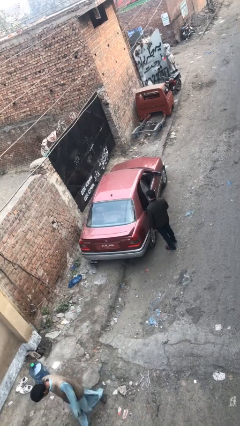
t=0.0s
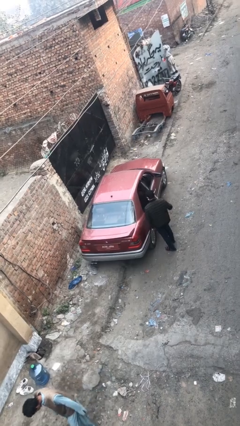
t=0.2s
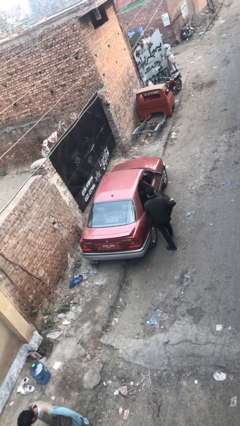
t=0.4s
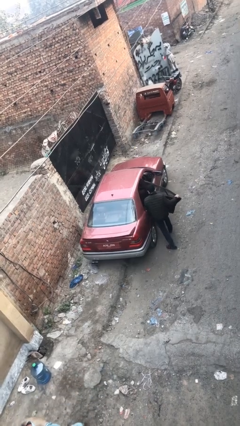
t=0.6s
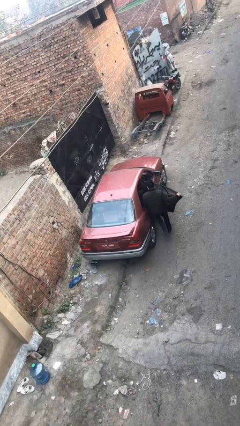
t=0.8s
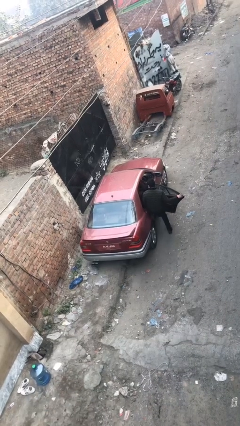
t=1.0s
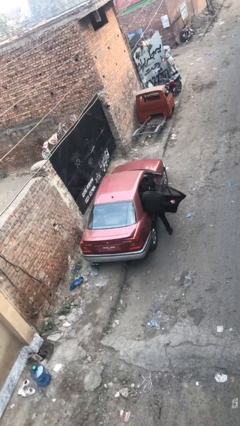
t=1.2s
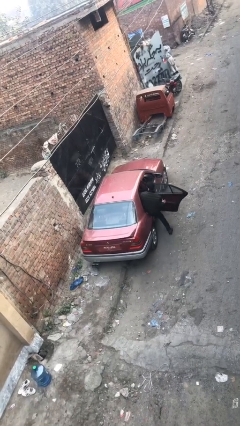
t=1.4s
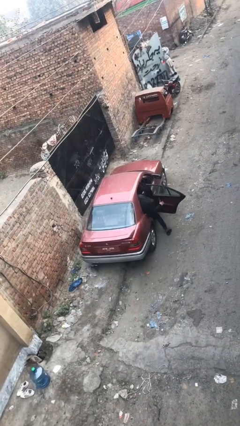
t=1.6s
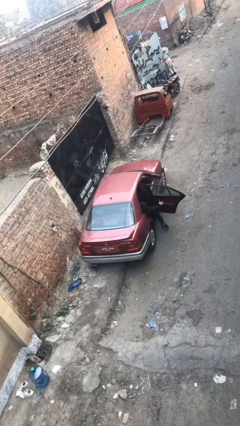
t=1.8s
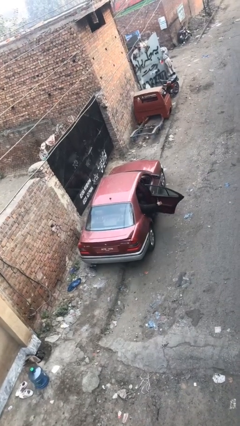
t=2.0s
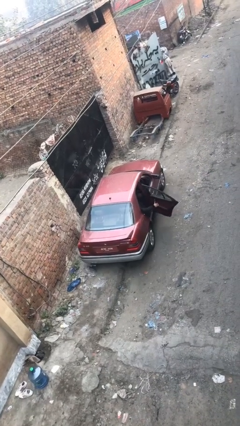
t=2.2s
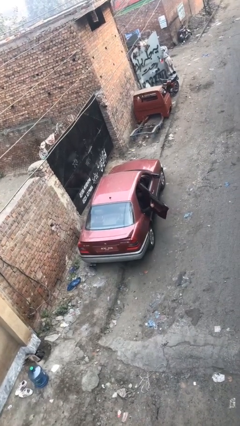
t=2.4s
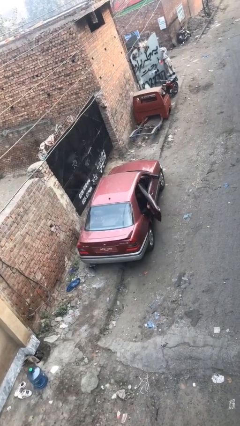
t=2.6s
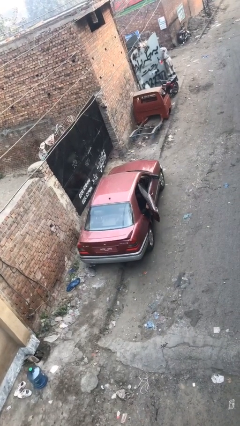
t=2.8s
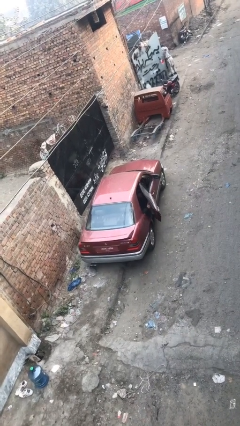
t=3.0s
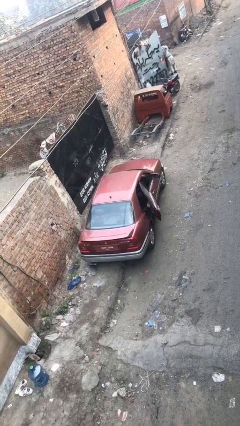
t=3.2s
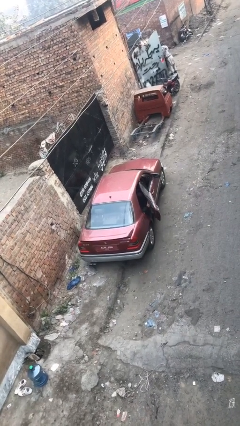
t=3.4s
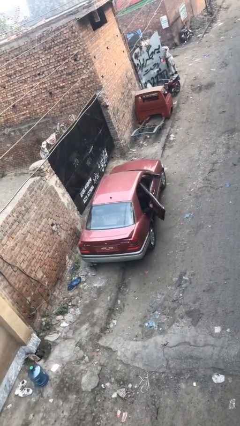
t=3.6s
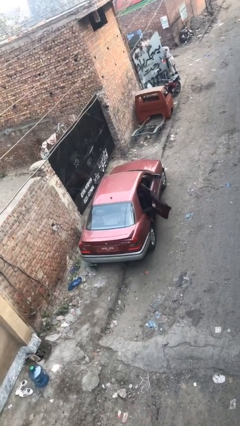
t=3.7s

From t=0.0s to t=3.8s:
car picks up person

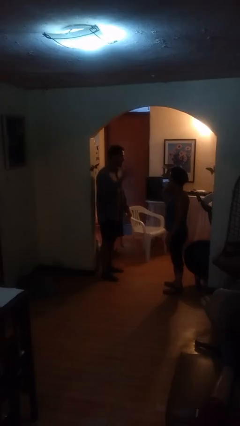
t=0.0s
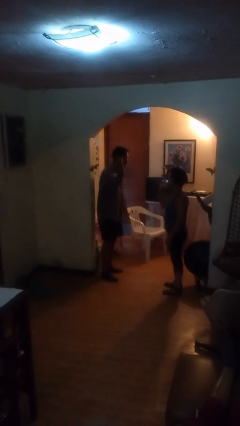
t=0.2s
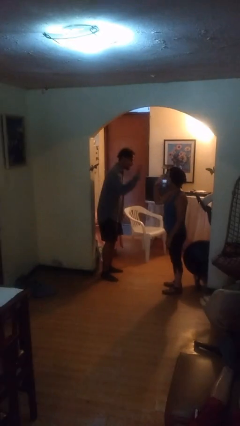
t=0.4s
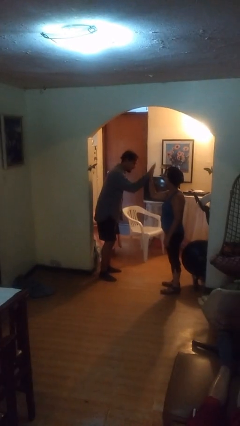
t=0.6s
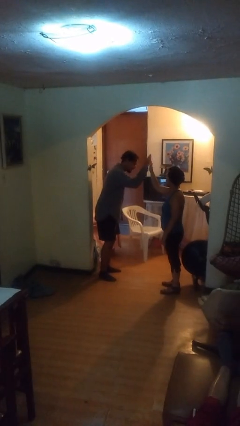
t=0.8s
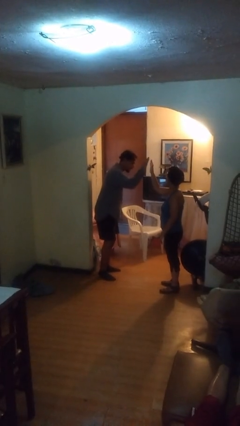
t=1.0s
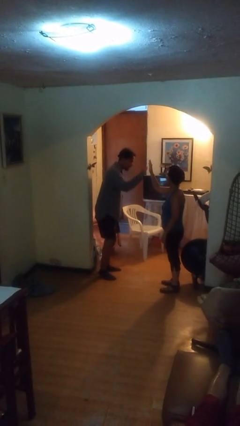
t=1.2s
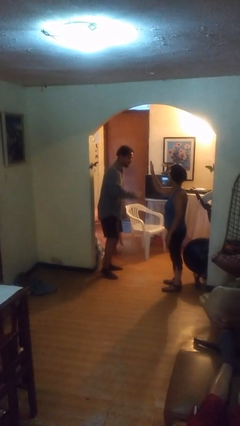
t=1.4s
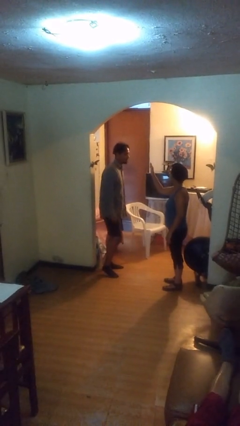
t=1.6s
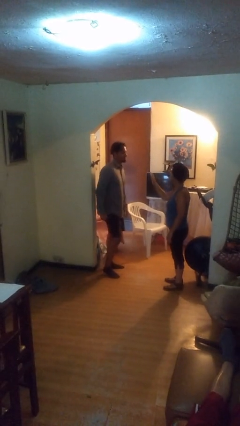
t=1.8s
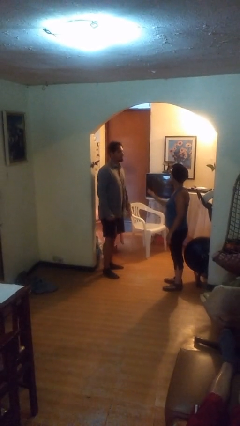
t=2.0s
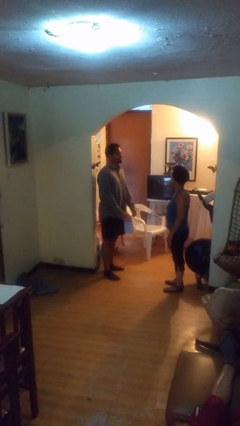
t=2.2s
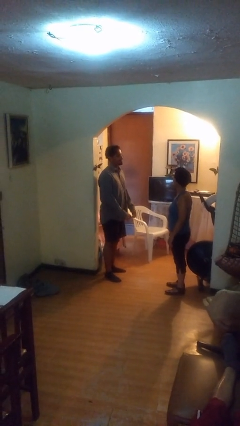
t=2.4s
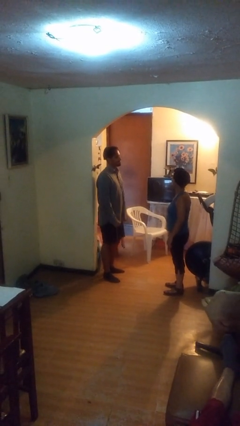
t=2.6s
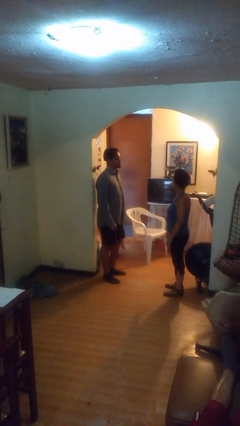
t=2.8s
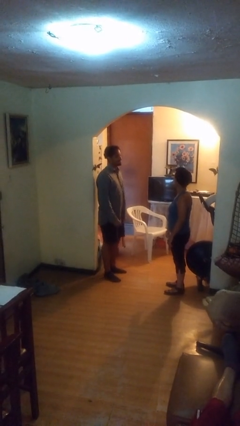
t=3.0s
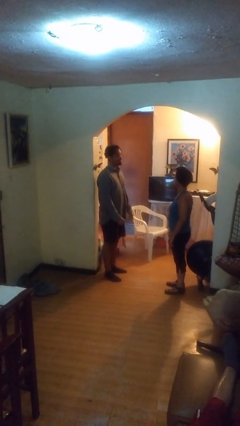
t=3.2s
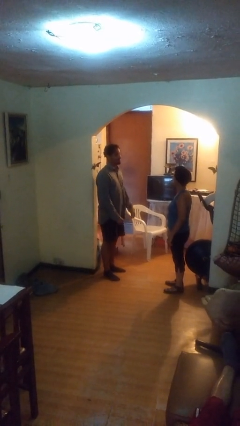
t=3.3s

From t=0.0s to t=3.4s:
person highfives hand

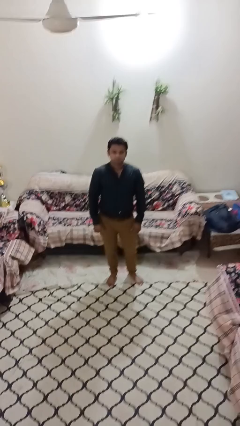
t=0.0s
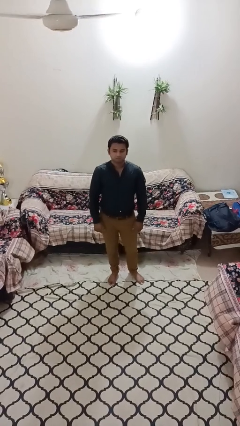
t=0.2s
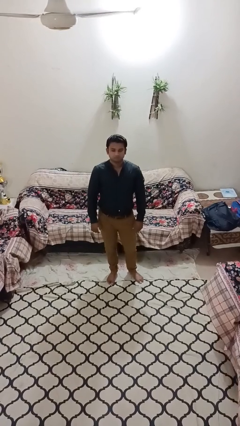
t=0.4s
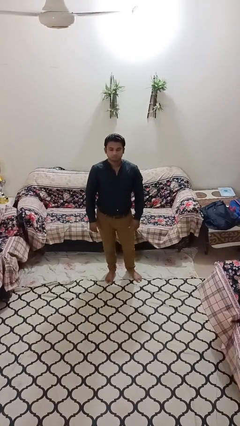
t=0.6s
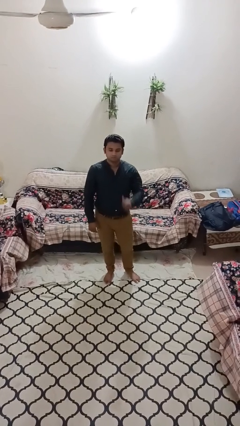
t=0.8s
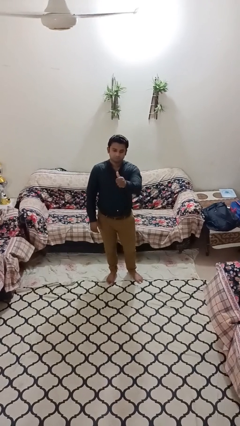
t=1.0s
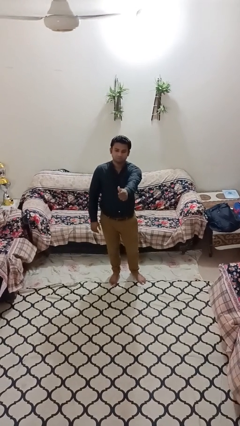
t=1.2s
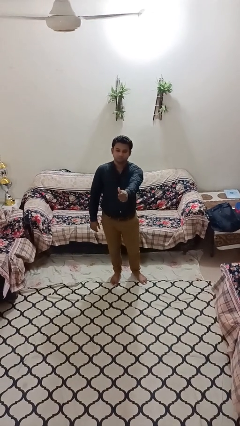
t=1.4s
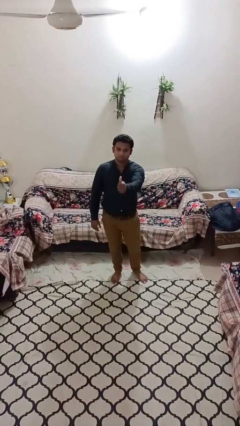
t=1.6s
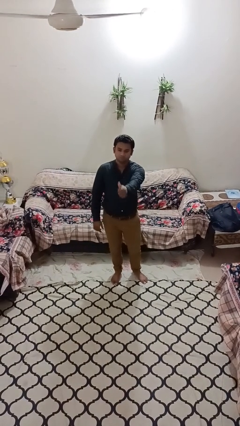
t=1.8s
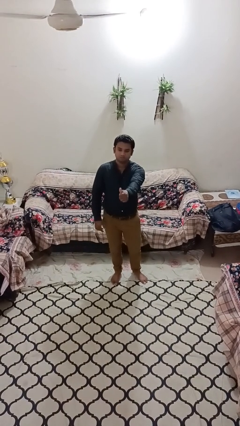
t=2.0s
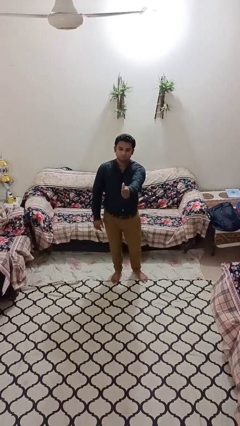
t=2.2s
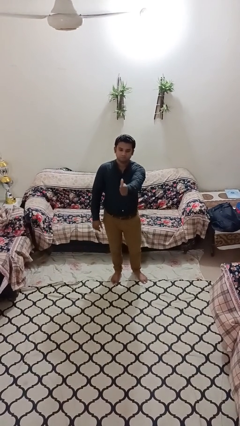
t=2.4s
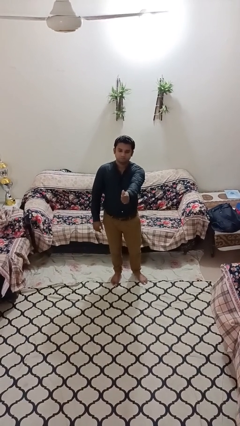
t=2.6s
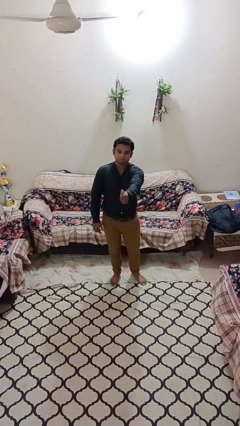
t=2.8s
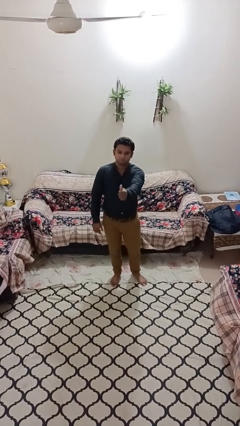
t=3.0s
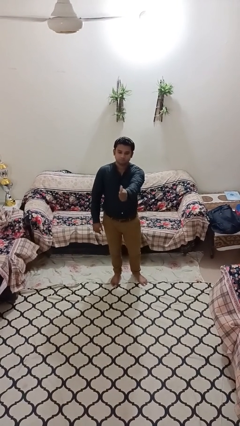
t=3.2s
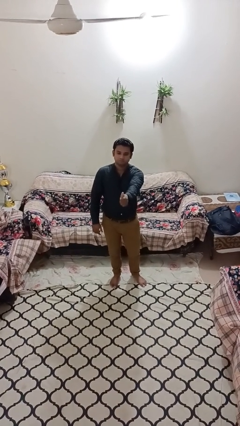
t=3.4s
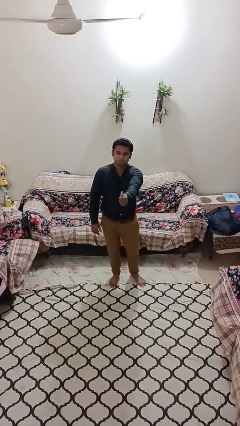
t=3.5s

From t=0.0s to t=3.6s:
person gestures thumbs up

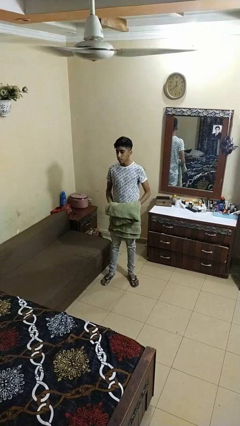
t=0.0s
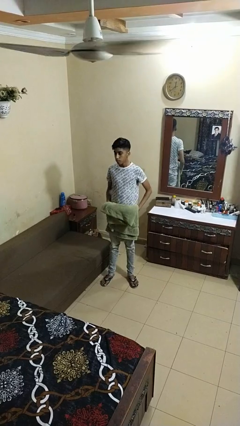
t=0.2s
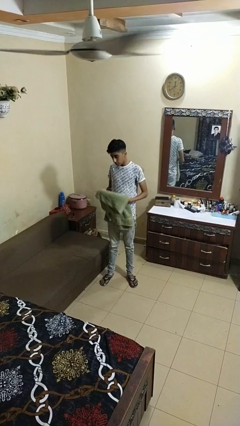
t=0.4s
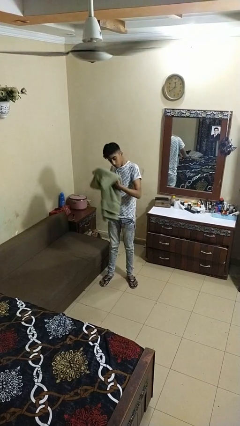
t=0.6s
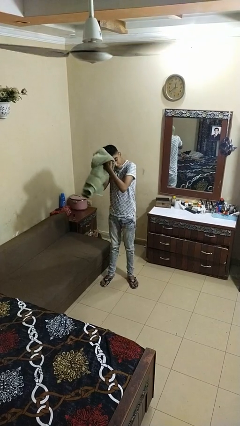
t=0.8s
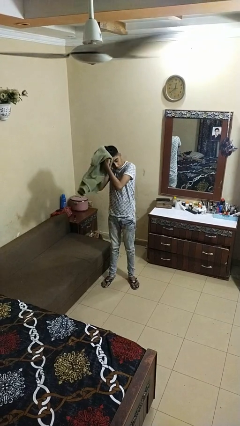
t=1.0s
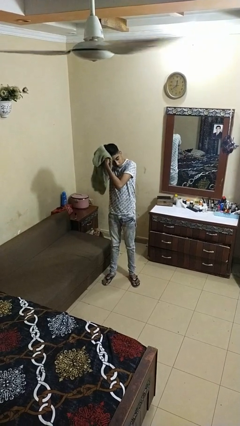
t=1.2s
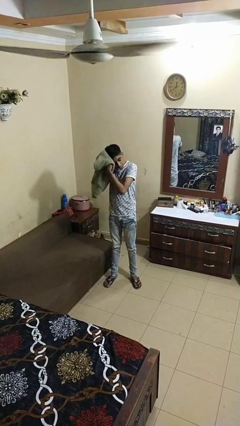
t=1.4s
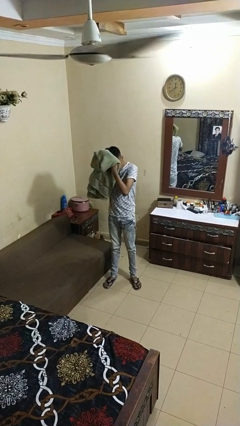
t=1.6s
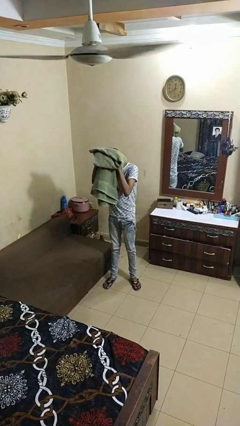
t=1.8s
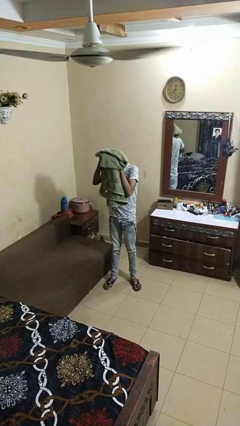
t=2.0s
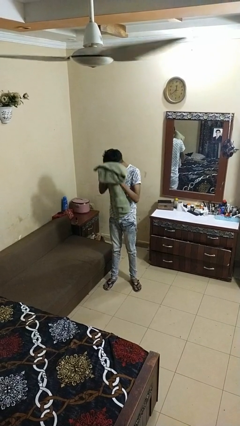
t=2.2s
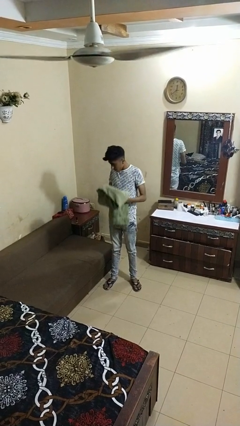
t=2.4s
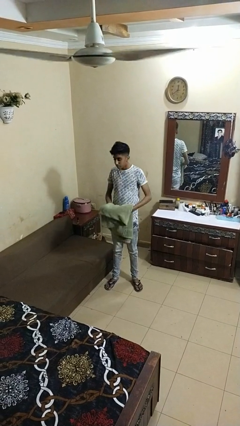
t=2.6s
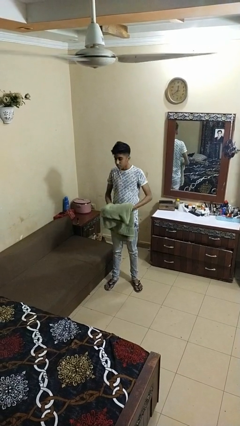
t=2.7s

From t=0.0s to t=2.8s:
person dries hair with towel

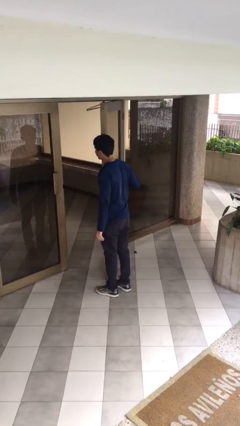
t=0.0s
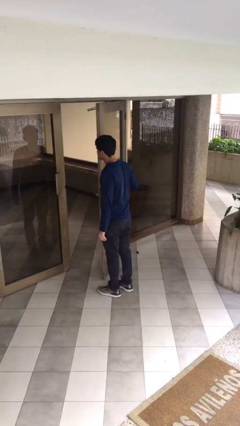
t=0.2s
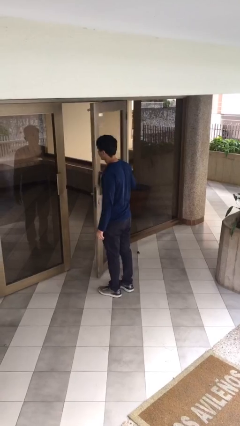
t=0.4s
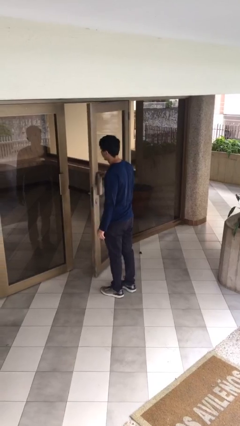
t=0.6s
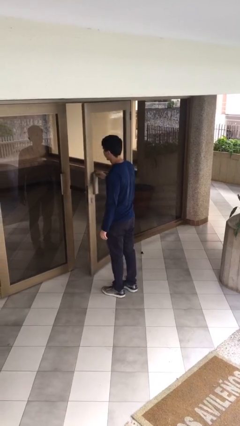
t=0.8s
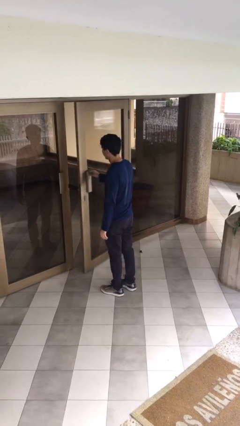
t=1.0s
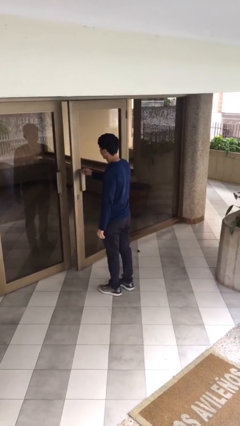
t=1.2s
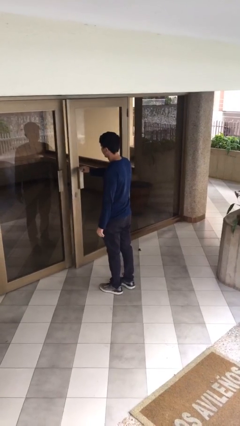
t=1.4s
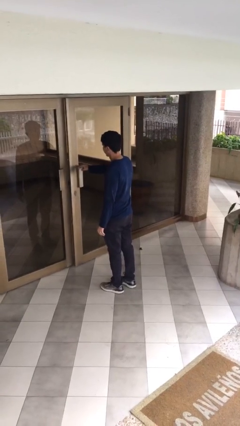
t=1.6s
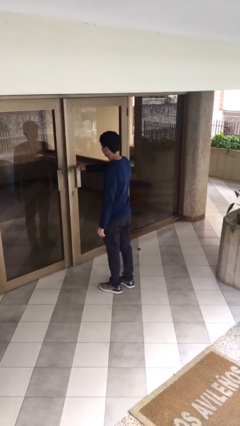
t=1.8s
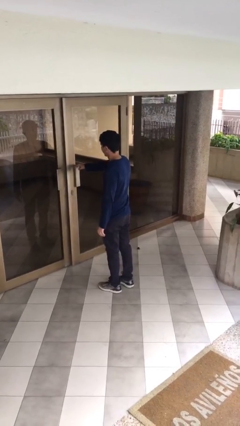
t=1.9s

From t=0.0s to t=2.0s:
person closes facility door

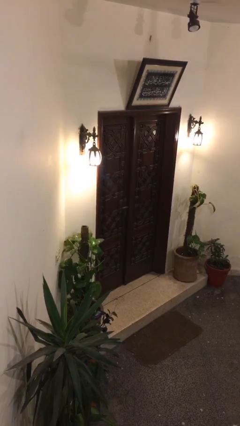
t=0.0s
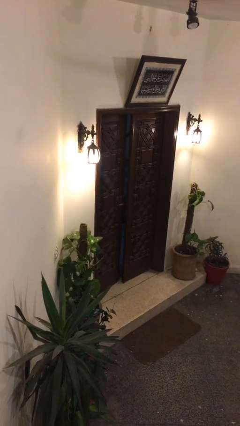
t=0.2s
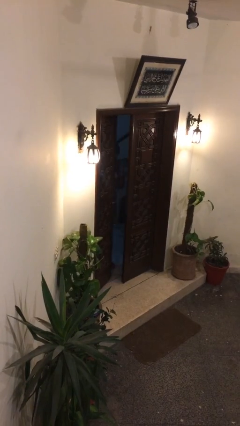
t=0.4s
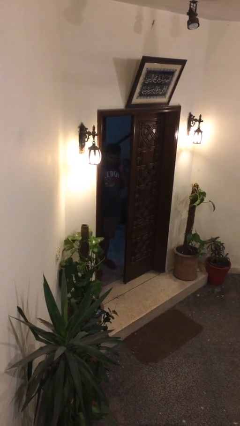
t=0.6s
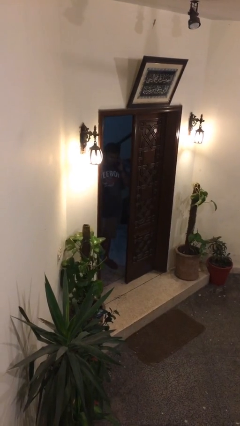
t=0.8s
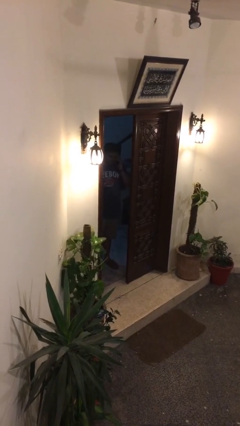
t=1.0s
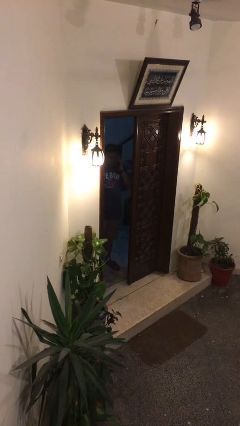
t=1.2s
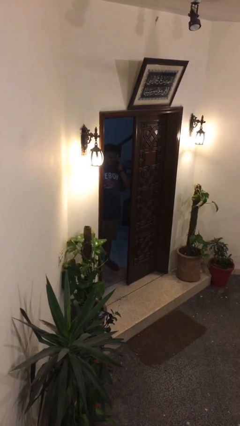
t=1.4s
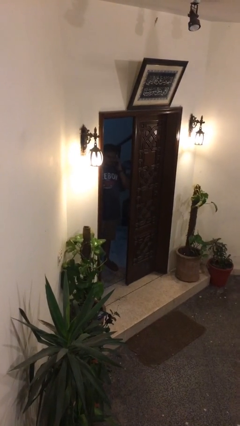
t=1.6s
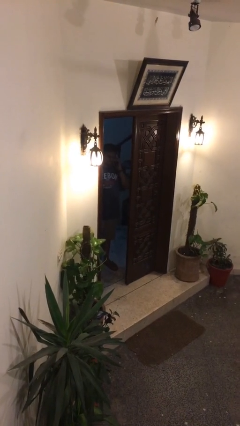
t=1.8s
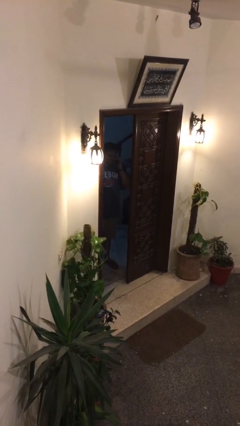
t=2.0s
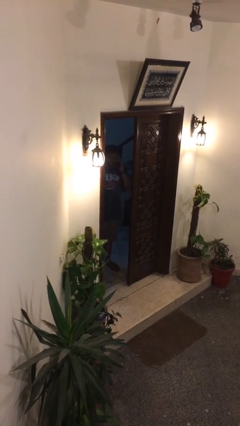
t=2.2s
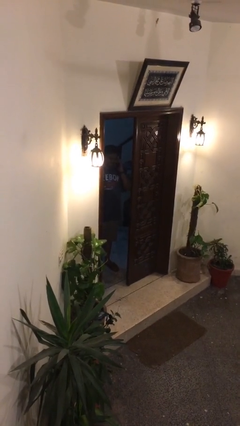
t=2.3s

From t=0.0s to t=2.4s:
person opens facility door
